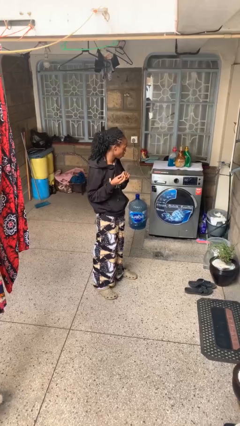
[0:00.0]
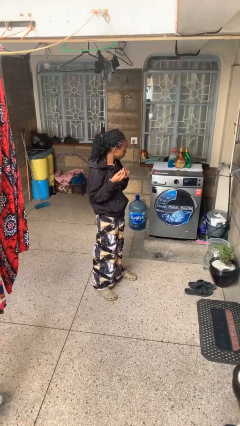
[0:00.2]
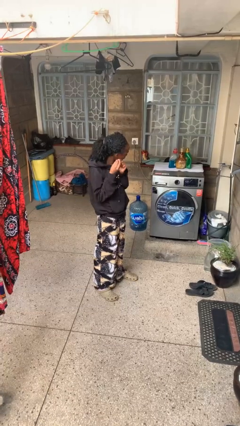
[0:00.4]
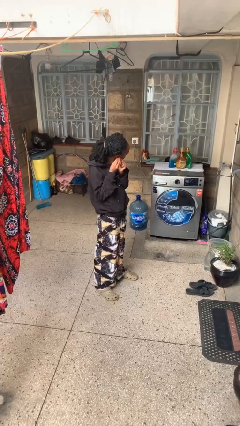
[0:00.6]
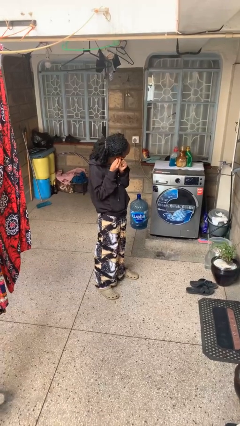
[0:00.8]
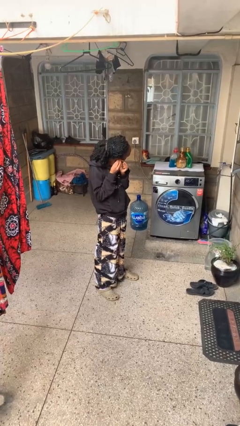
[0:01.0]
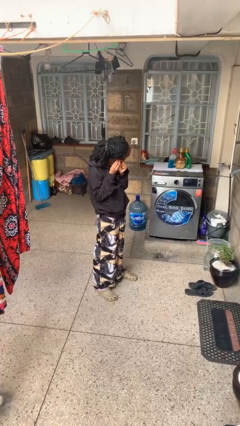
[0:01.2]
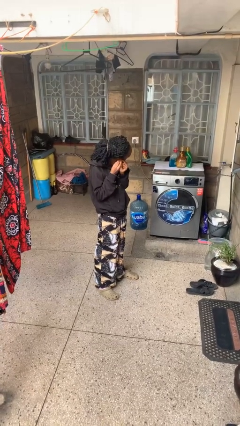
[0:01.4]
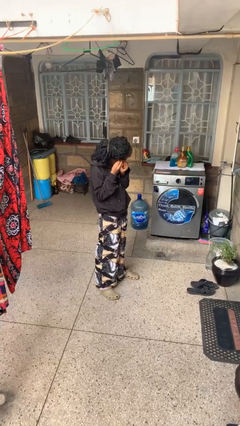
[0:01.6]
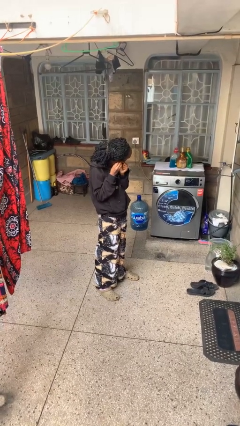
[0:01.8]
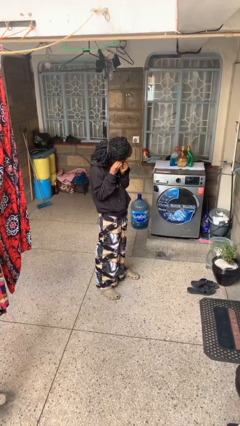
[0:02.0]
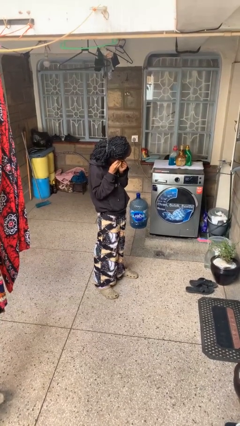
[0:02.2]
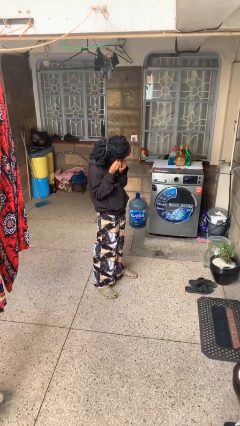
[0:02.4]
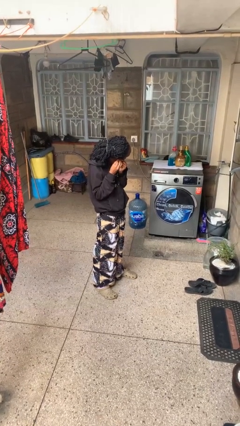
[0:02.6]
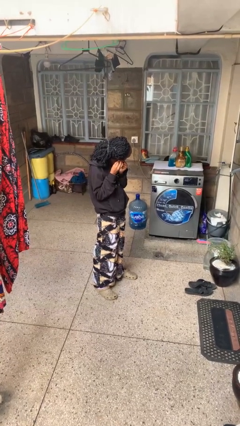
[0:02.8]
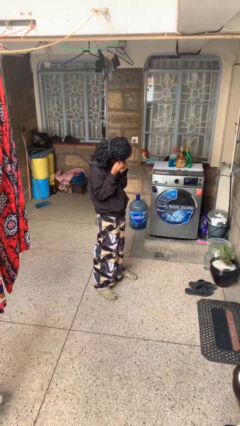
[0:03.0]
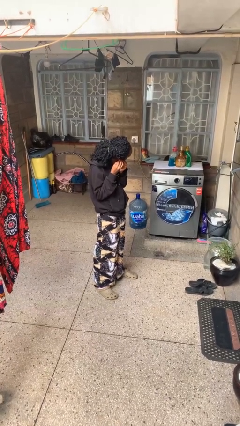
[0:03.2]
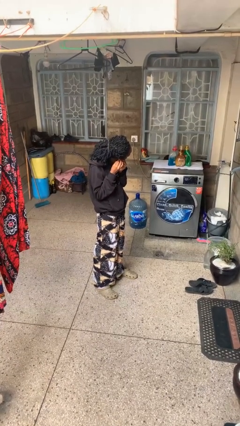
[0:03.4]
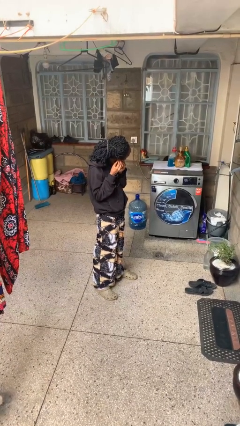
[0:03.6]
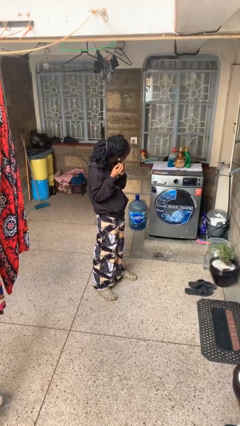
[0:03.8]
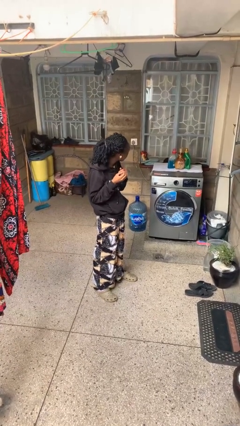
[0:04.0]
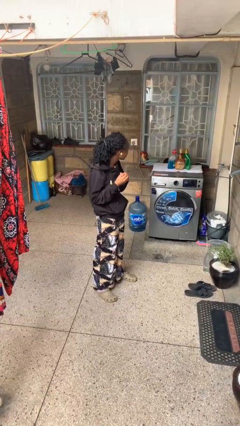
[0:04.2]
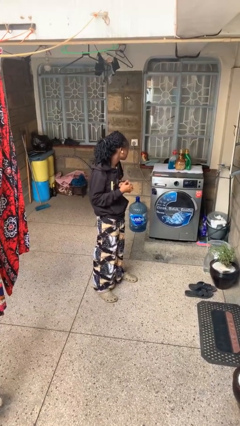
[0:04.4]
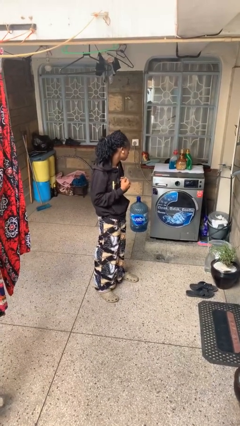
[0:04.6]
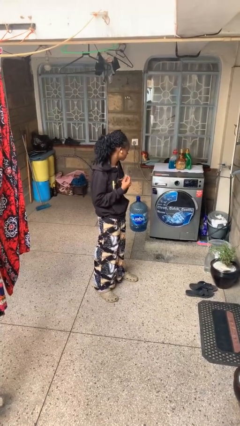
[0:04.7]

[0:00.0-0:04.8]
person puts on earrings

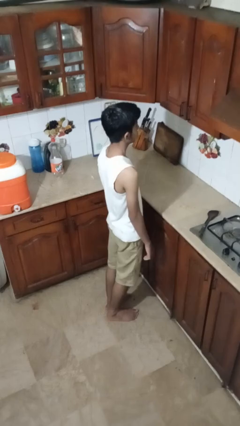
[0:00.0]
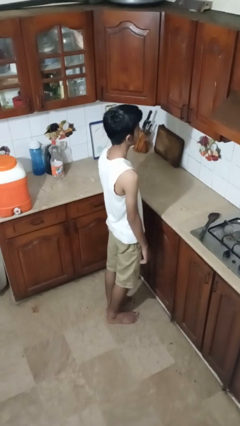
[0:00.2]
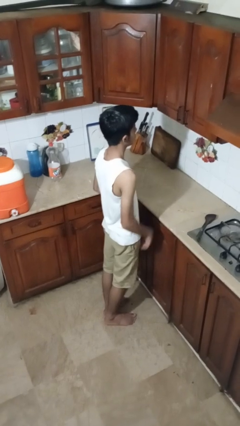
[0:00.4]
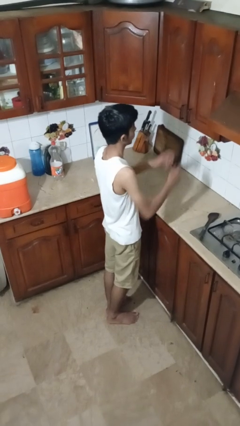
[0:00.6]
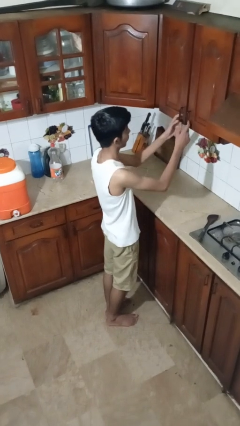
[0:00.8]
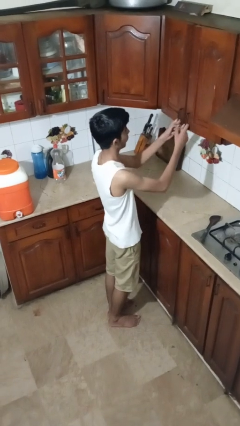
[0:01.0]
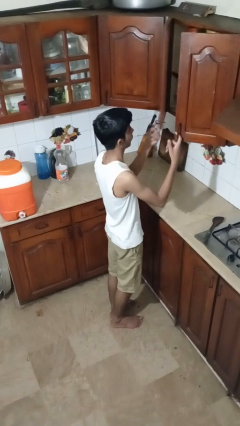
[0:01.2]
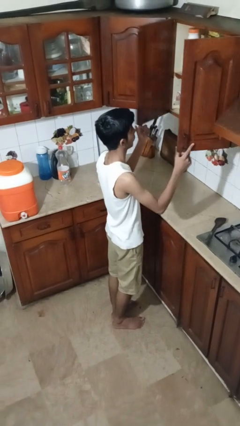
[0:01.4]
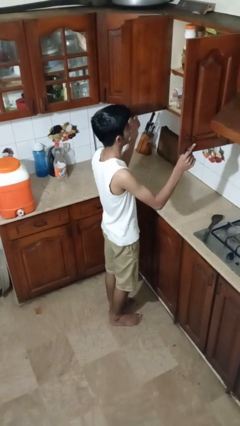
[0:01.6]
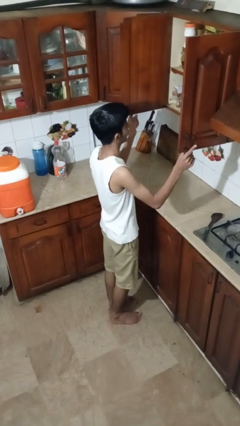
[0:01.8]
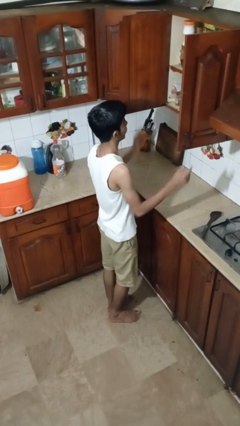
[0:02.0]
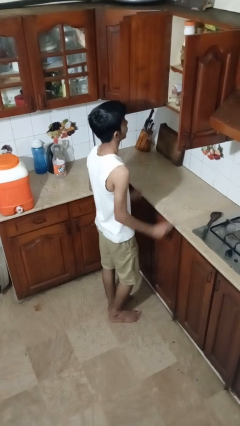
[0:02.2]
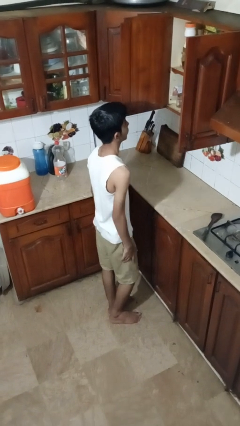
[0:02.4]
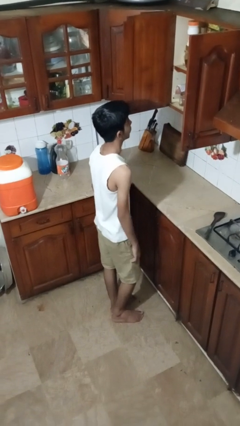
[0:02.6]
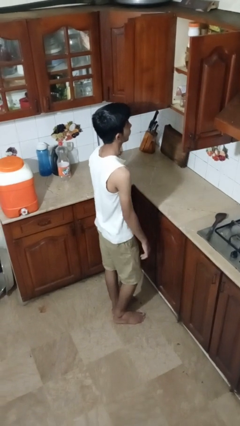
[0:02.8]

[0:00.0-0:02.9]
person opens cabinet

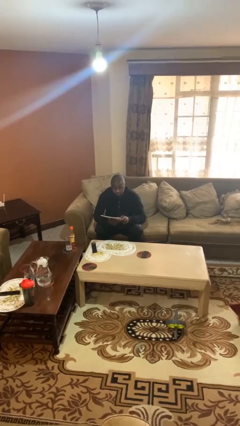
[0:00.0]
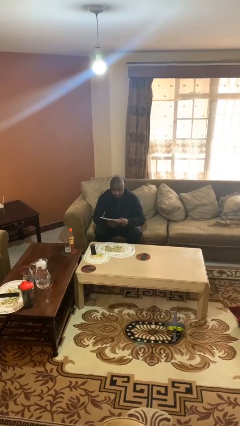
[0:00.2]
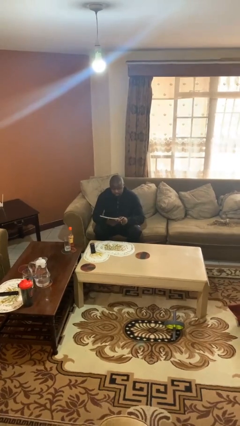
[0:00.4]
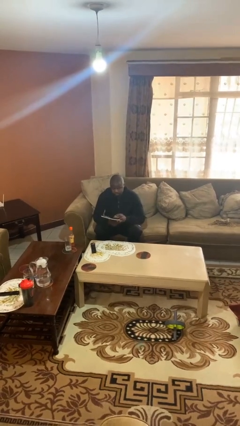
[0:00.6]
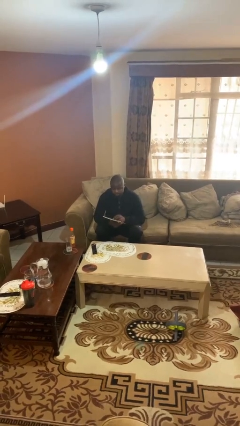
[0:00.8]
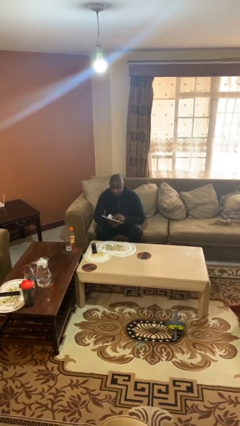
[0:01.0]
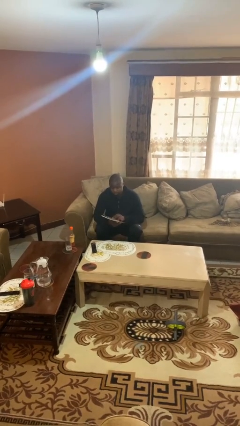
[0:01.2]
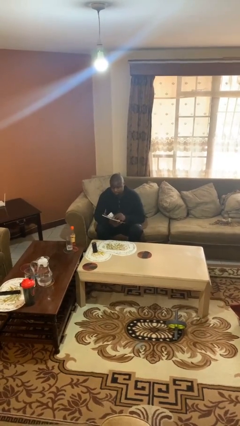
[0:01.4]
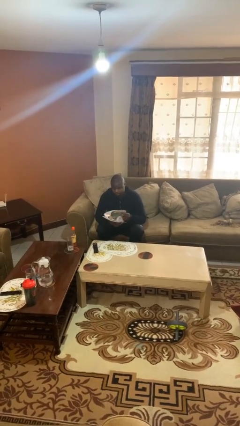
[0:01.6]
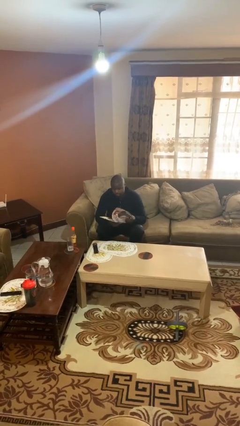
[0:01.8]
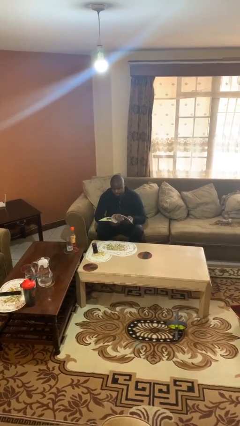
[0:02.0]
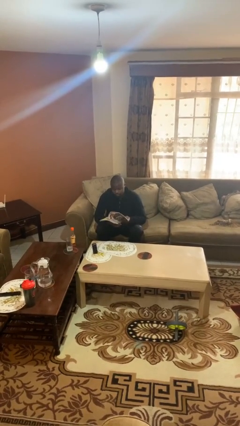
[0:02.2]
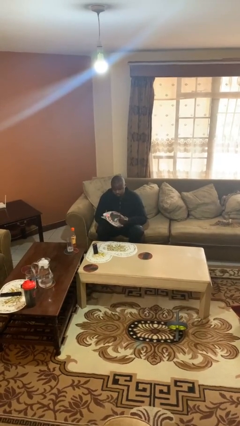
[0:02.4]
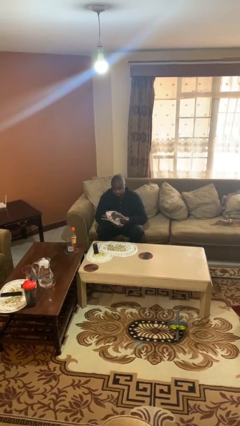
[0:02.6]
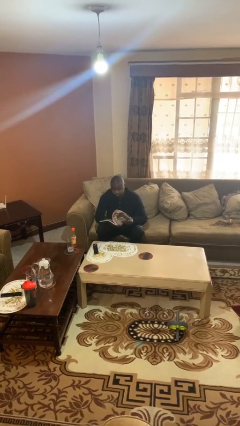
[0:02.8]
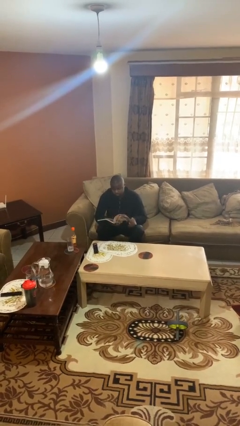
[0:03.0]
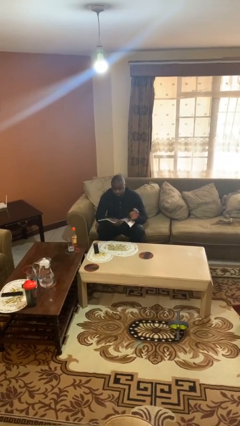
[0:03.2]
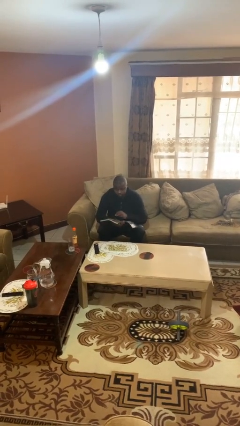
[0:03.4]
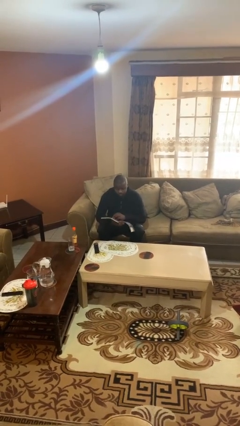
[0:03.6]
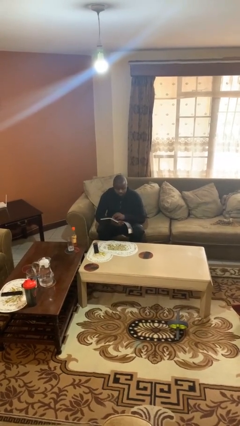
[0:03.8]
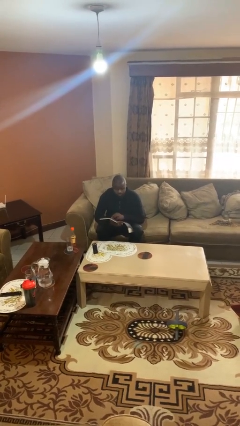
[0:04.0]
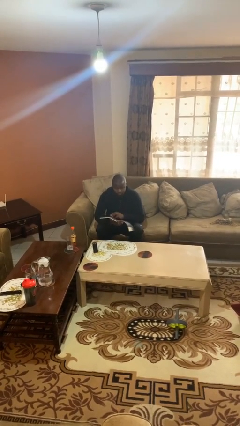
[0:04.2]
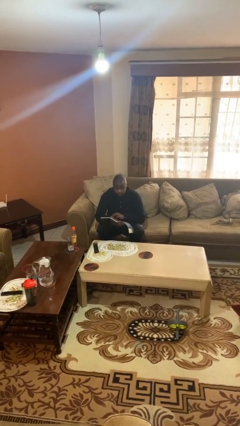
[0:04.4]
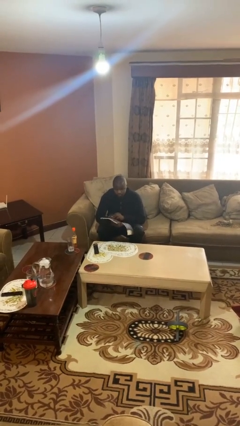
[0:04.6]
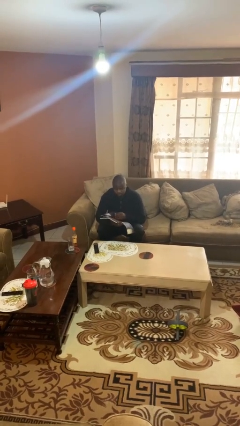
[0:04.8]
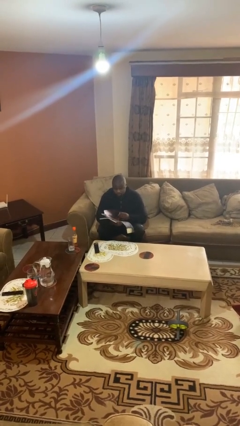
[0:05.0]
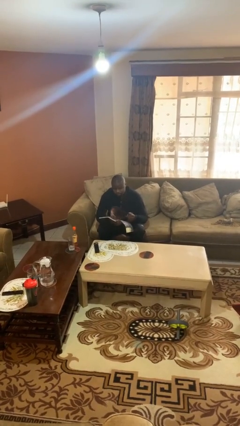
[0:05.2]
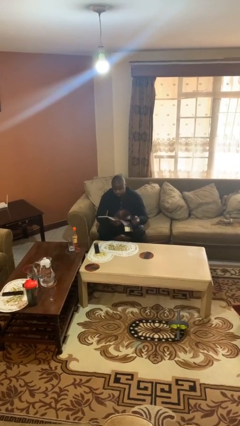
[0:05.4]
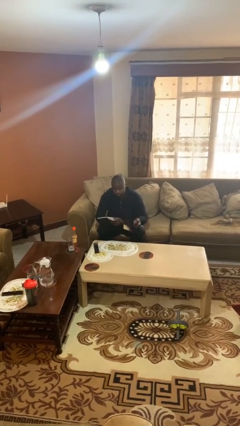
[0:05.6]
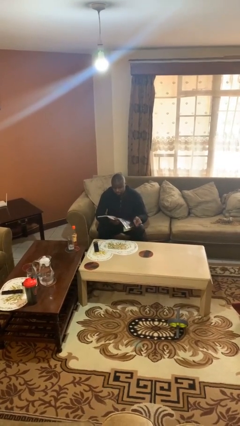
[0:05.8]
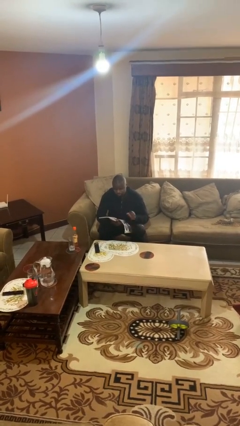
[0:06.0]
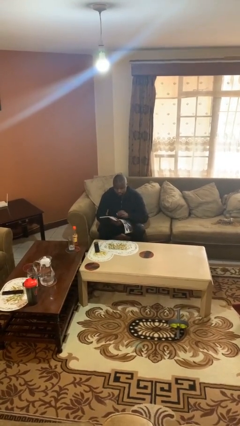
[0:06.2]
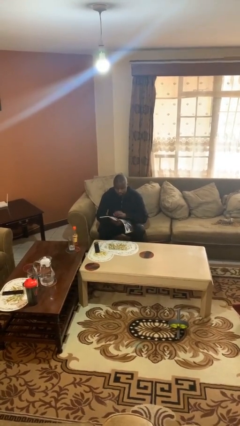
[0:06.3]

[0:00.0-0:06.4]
person reads document

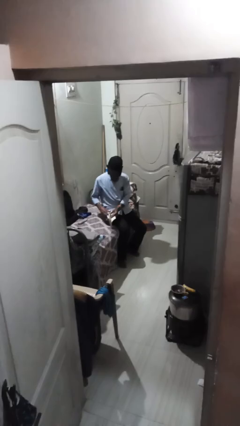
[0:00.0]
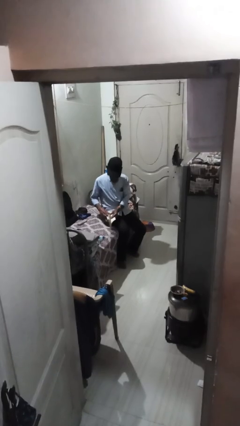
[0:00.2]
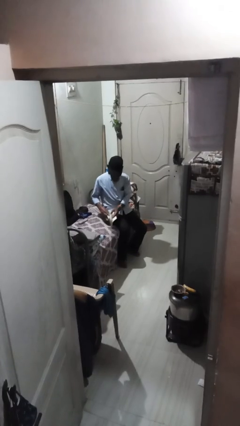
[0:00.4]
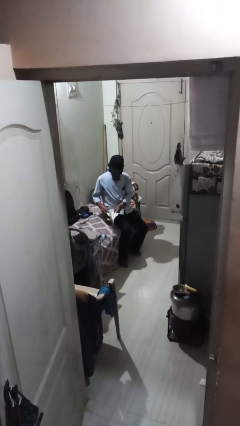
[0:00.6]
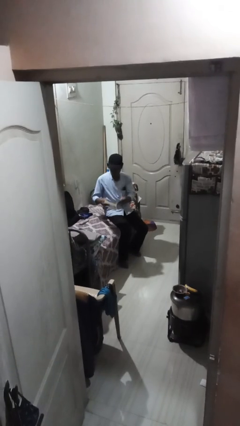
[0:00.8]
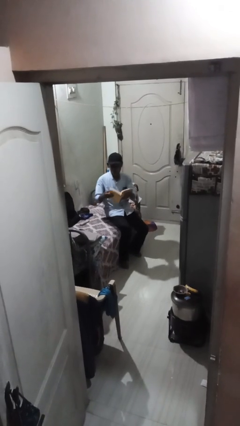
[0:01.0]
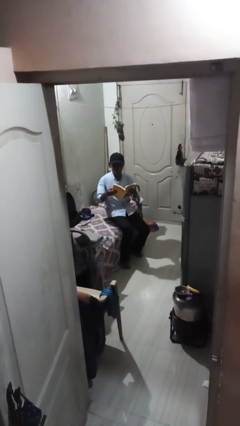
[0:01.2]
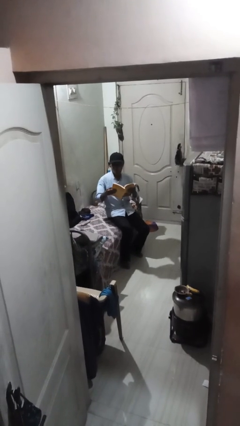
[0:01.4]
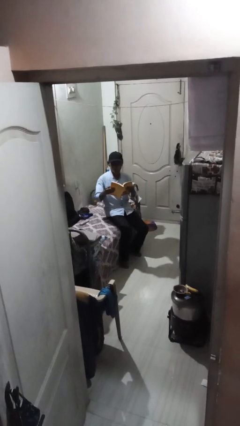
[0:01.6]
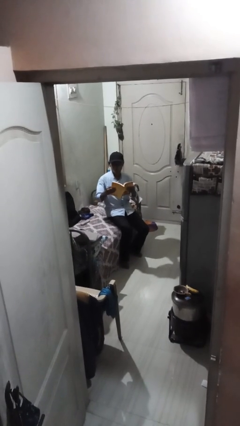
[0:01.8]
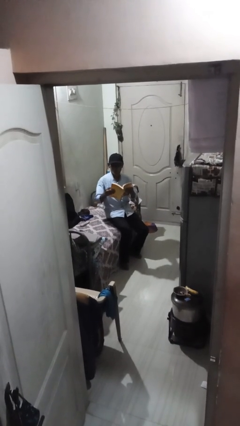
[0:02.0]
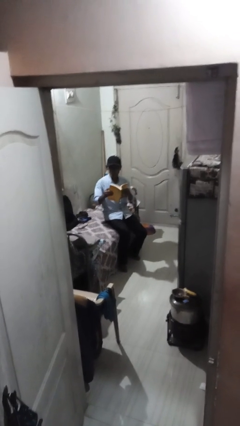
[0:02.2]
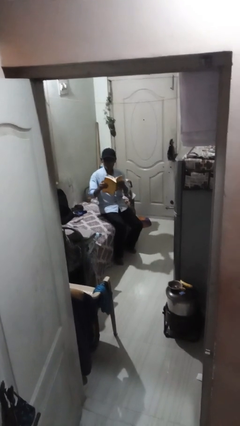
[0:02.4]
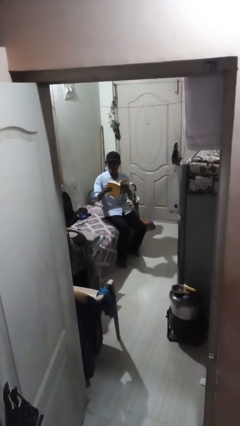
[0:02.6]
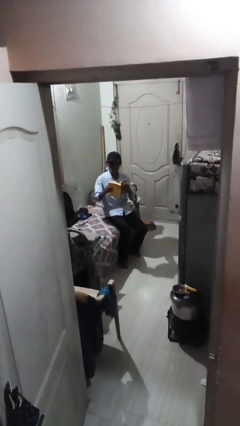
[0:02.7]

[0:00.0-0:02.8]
person reads book

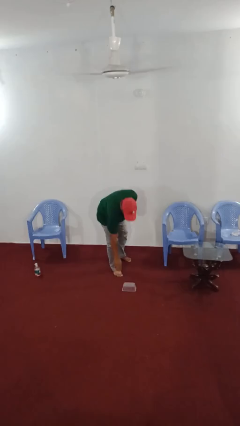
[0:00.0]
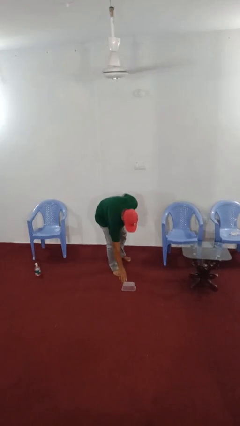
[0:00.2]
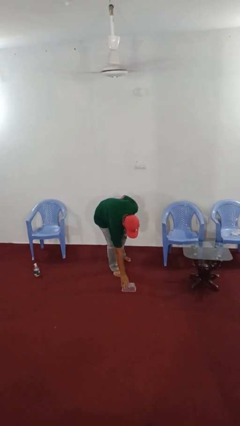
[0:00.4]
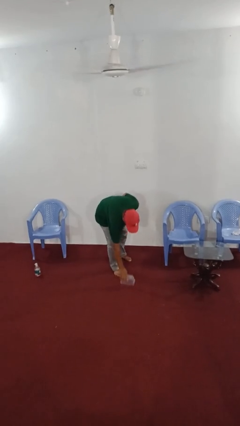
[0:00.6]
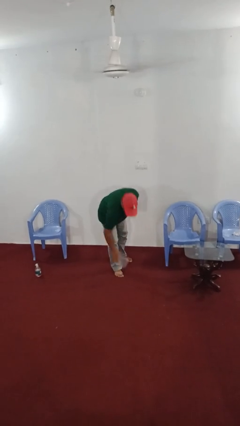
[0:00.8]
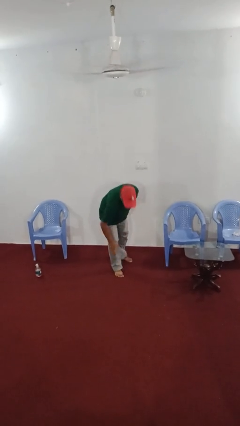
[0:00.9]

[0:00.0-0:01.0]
person picks up object from floor
